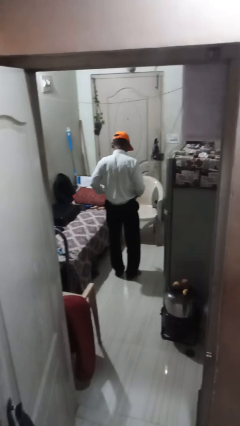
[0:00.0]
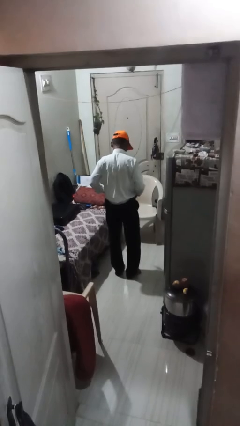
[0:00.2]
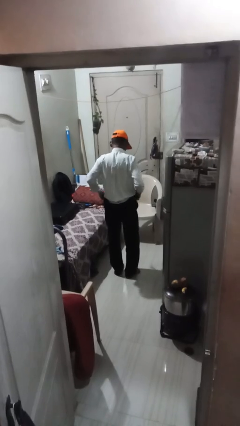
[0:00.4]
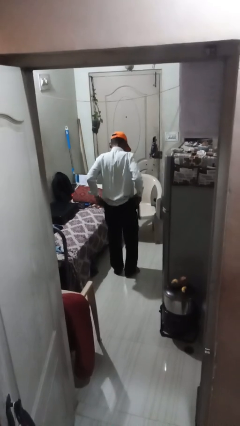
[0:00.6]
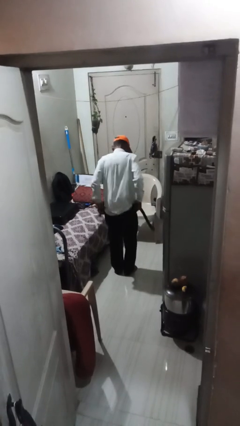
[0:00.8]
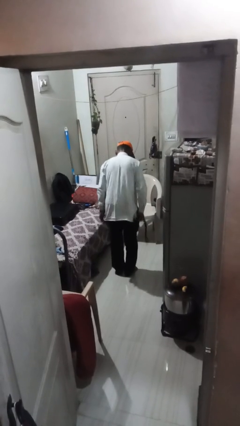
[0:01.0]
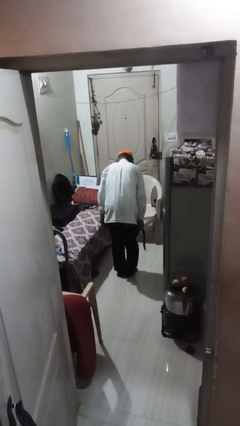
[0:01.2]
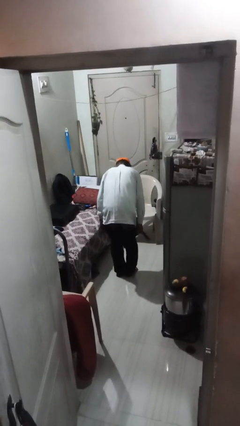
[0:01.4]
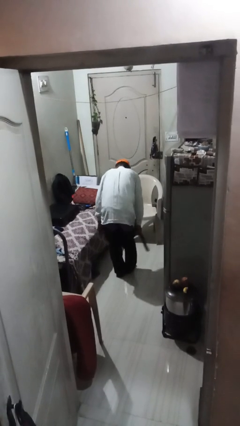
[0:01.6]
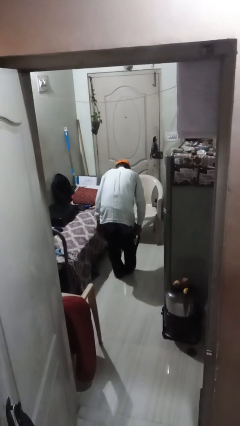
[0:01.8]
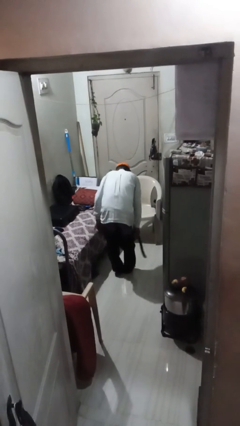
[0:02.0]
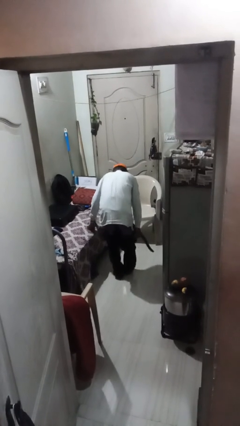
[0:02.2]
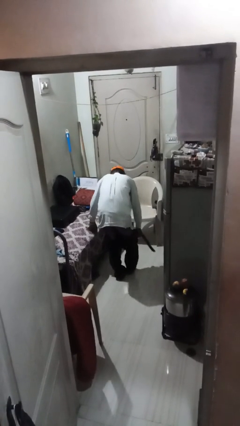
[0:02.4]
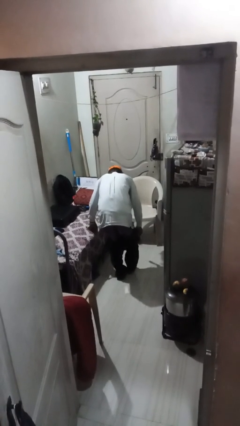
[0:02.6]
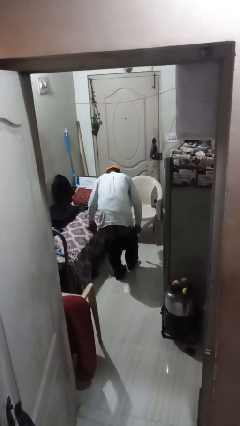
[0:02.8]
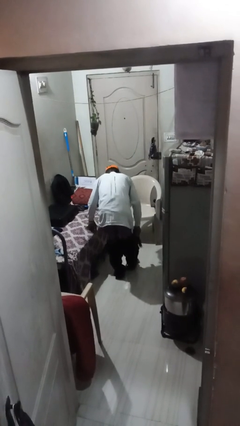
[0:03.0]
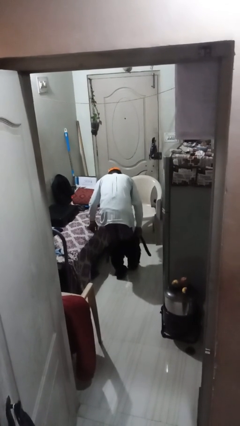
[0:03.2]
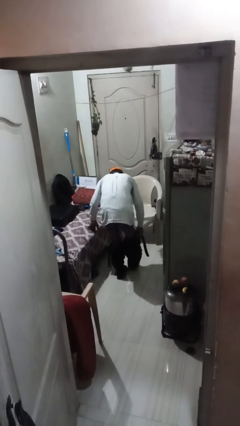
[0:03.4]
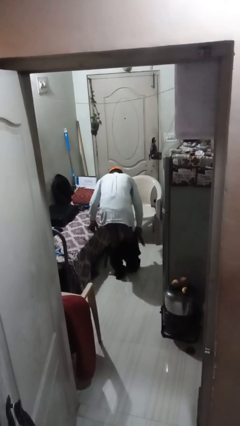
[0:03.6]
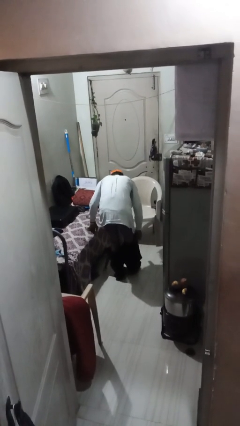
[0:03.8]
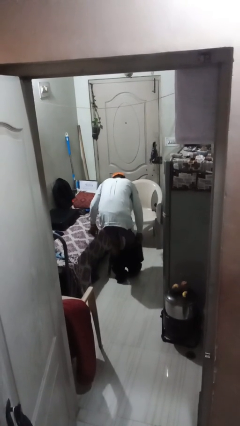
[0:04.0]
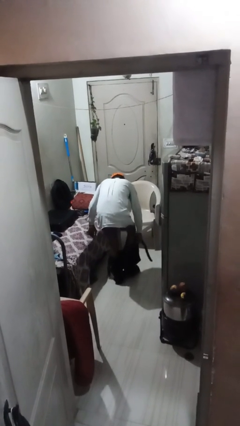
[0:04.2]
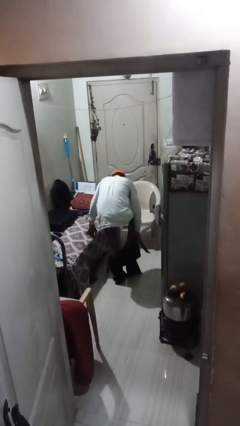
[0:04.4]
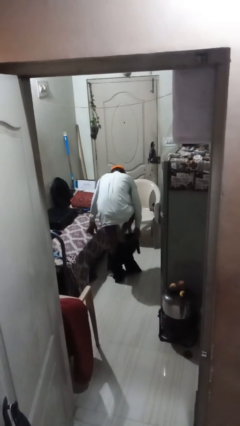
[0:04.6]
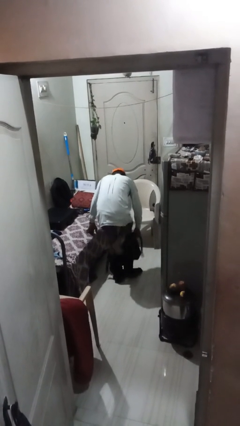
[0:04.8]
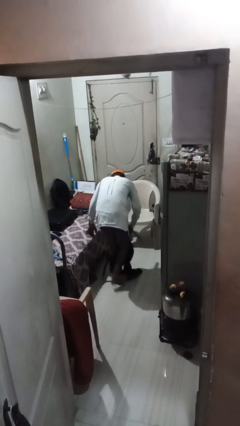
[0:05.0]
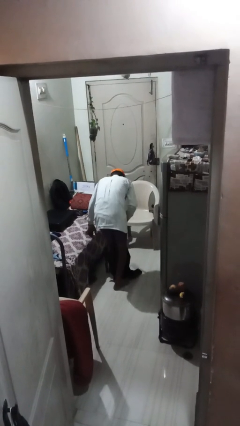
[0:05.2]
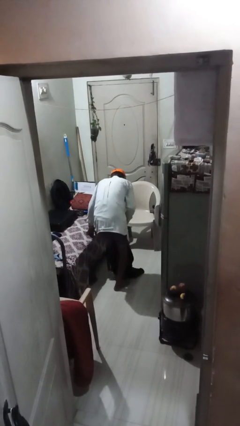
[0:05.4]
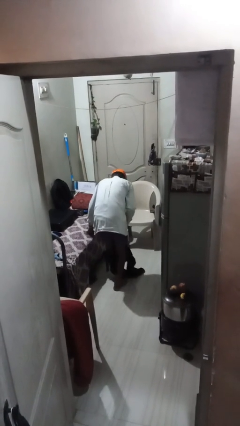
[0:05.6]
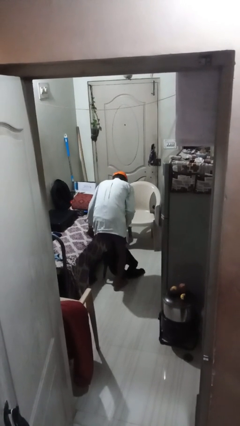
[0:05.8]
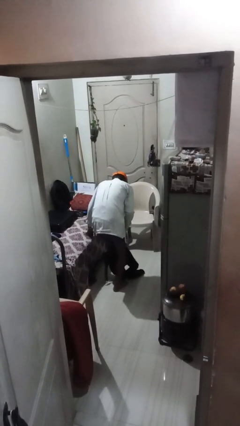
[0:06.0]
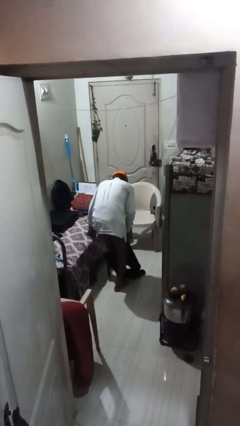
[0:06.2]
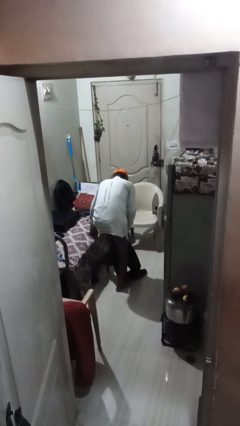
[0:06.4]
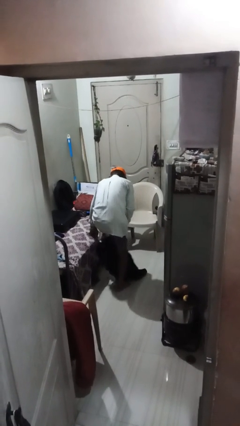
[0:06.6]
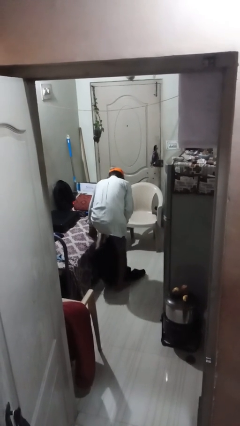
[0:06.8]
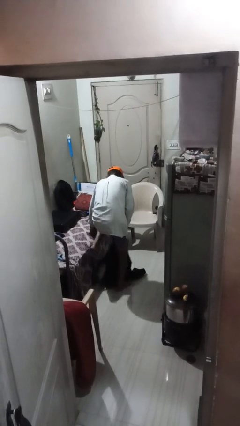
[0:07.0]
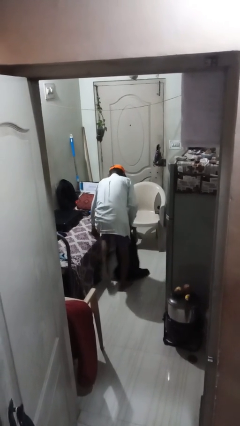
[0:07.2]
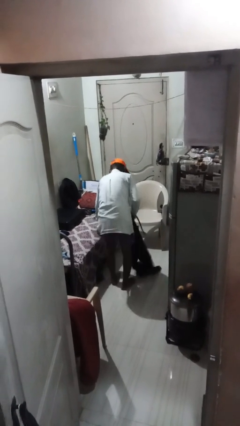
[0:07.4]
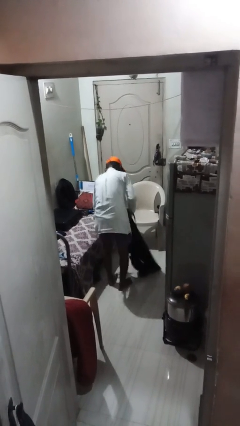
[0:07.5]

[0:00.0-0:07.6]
person takes off pants

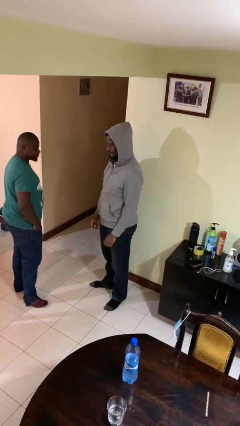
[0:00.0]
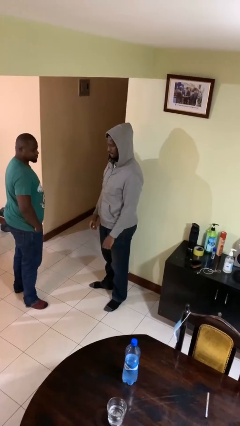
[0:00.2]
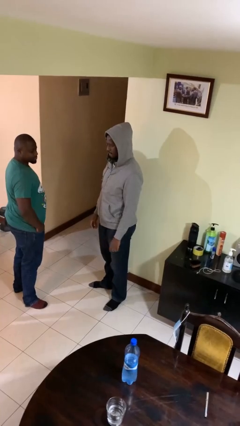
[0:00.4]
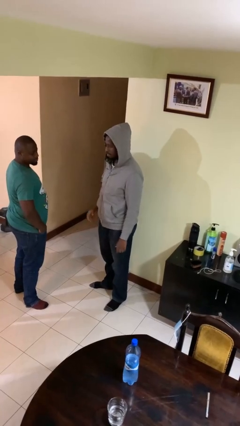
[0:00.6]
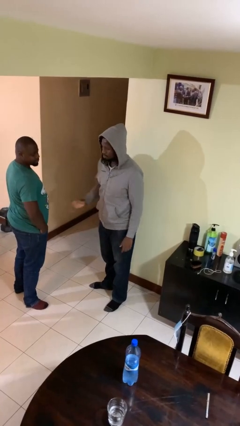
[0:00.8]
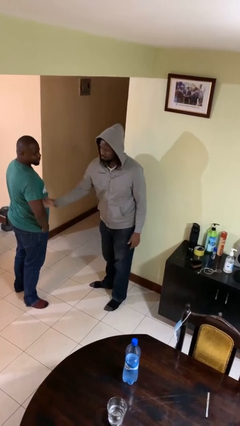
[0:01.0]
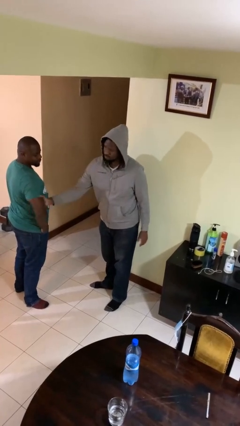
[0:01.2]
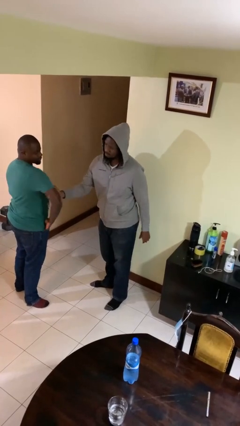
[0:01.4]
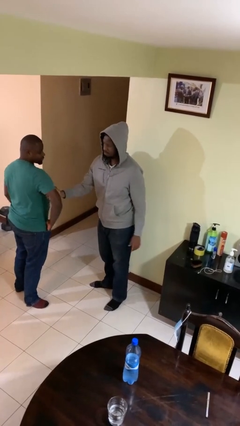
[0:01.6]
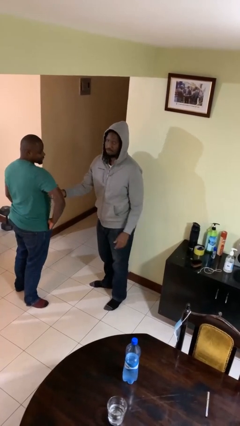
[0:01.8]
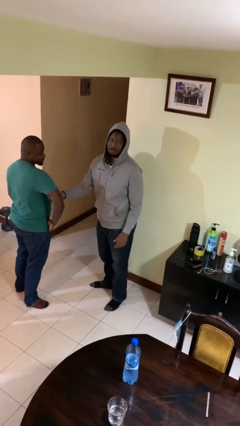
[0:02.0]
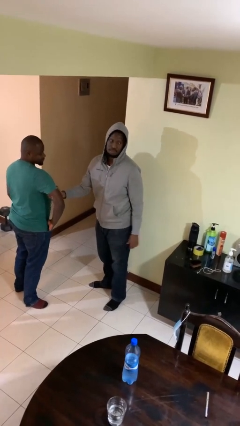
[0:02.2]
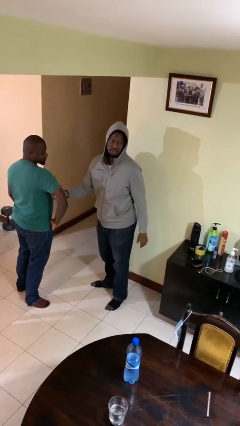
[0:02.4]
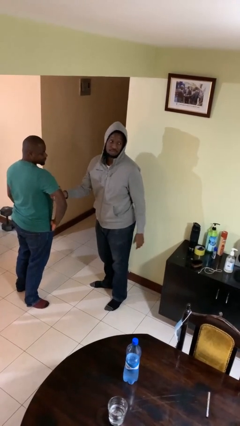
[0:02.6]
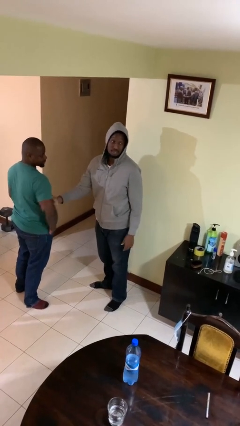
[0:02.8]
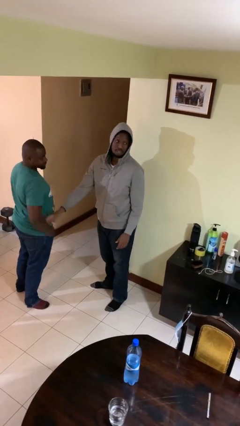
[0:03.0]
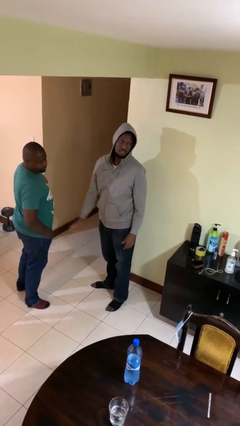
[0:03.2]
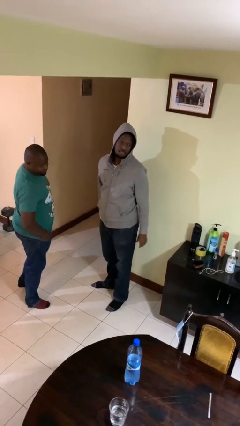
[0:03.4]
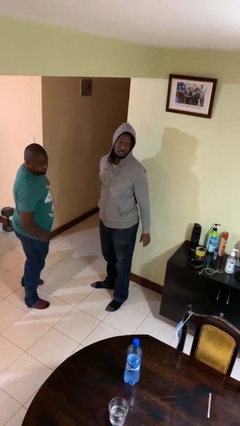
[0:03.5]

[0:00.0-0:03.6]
person grabs person by bicep

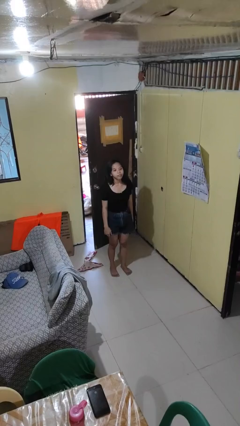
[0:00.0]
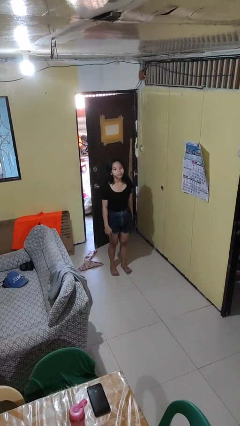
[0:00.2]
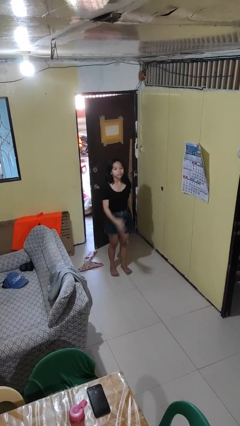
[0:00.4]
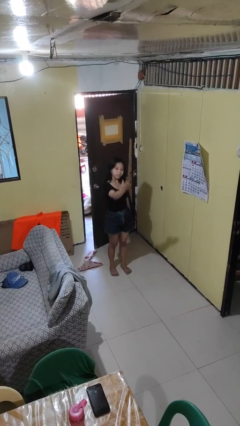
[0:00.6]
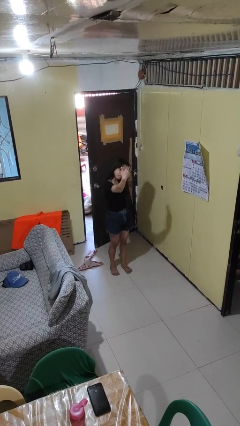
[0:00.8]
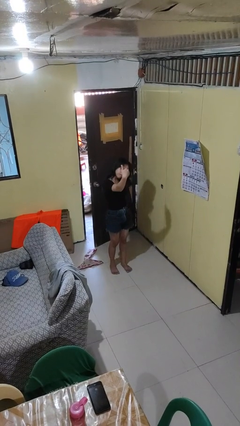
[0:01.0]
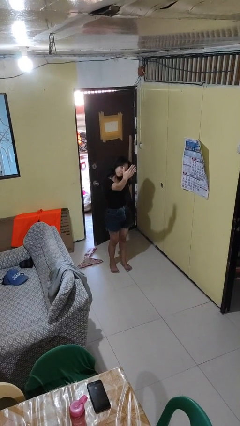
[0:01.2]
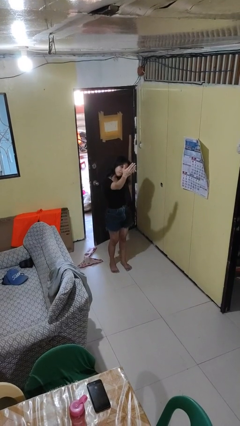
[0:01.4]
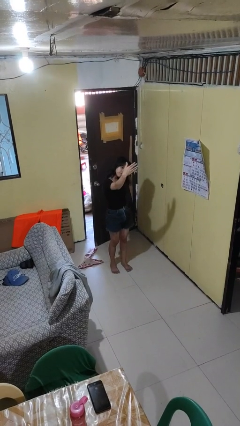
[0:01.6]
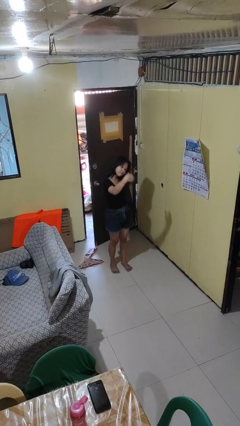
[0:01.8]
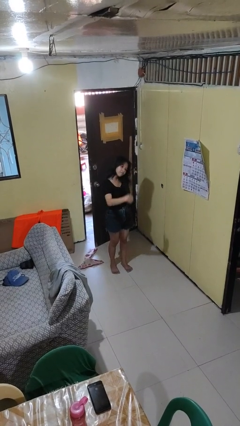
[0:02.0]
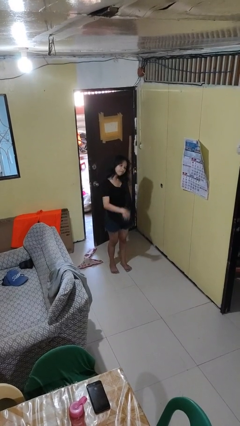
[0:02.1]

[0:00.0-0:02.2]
person gestures come here

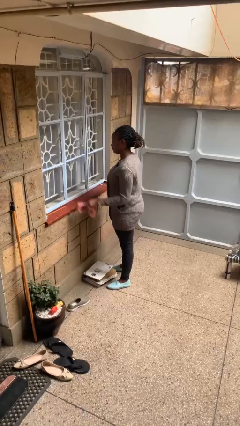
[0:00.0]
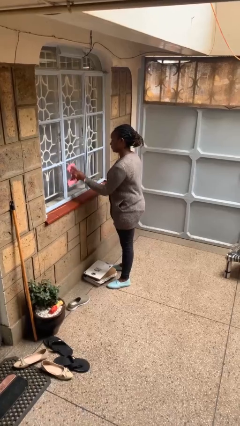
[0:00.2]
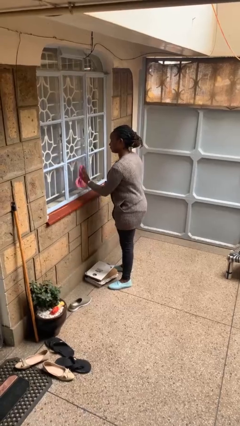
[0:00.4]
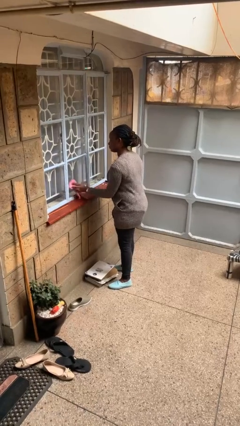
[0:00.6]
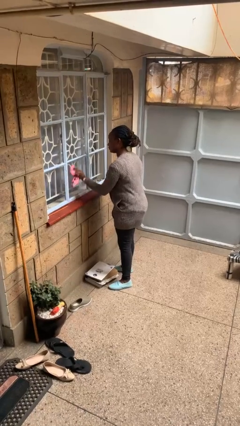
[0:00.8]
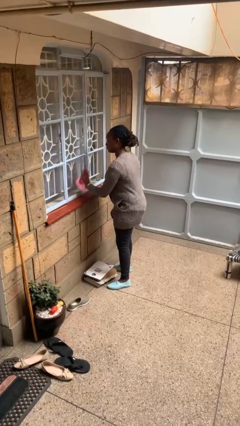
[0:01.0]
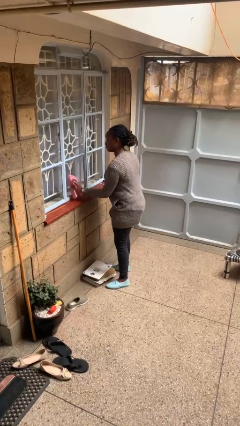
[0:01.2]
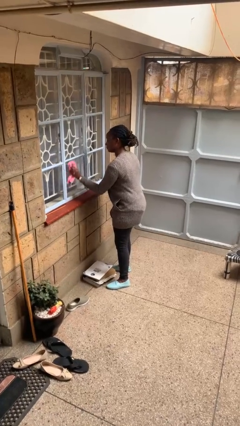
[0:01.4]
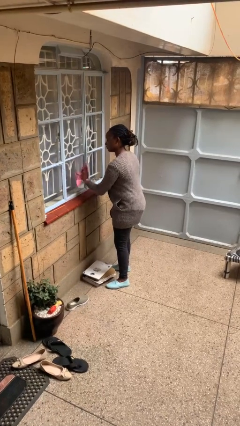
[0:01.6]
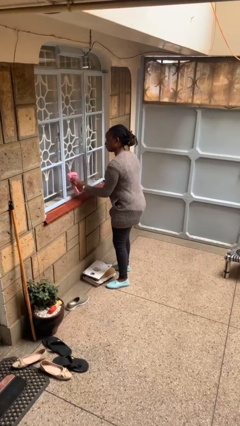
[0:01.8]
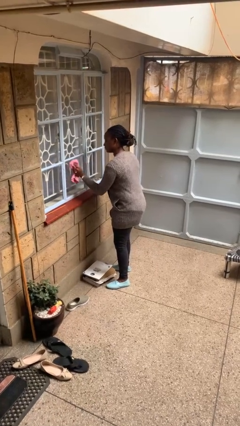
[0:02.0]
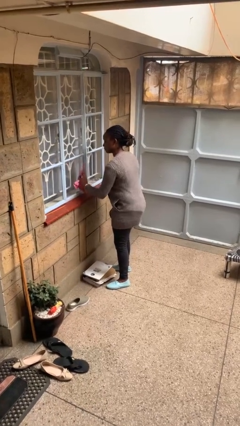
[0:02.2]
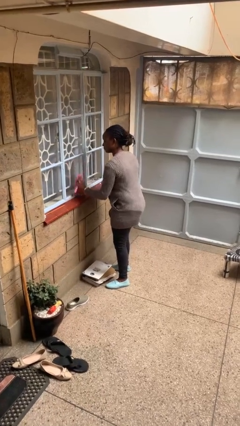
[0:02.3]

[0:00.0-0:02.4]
person washes window

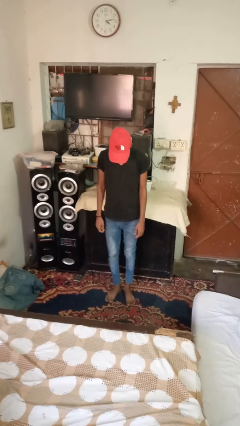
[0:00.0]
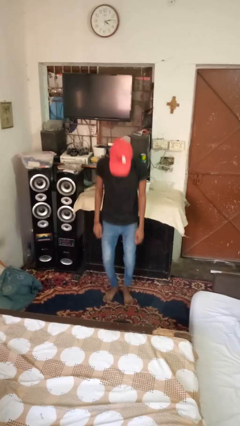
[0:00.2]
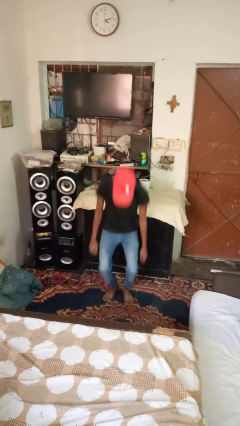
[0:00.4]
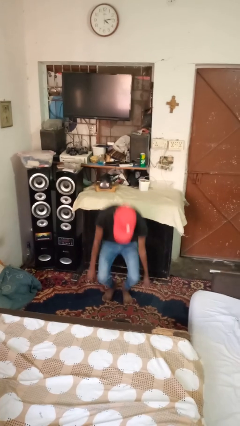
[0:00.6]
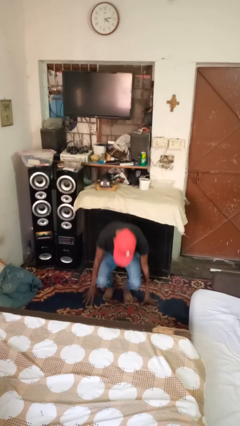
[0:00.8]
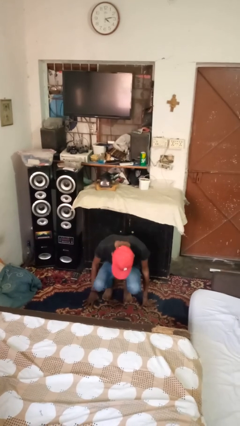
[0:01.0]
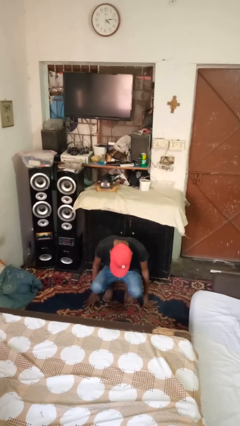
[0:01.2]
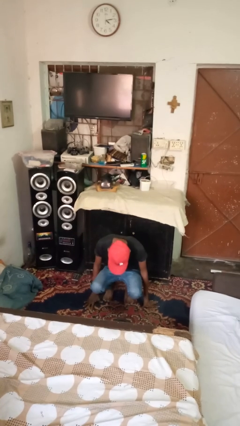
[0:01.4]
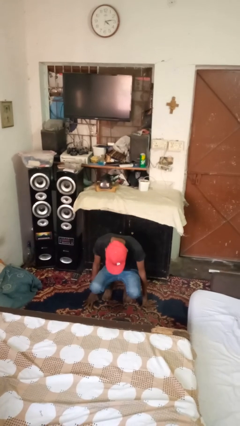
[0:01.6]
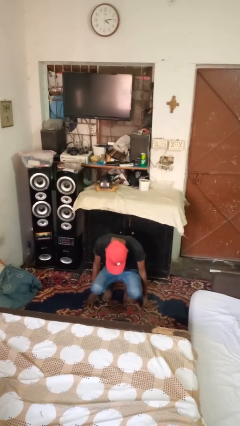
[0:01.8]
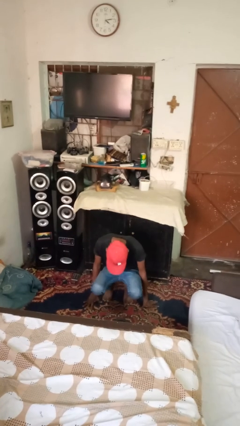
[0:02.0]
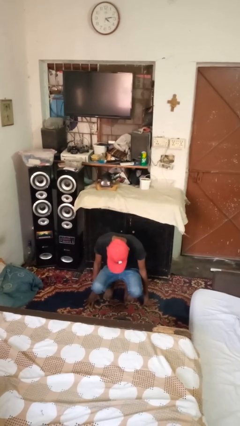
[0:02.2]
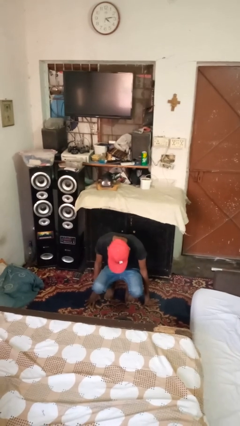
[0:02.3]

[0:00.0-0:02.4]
person falls while standing
